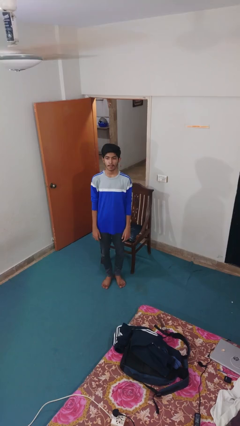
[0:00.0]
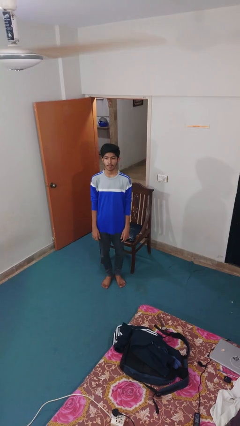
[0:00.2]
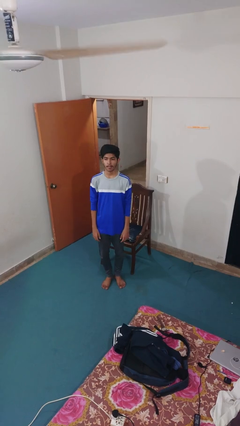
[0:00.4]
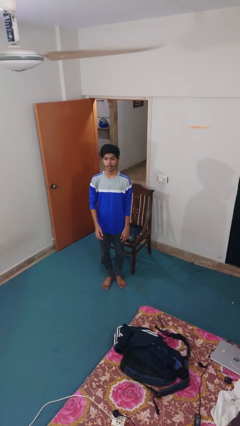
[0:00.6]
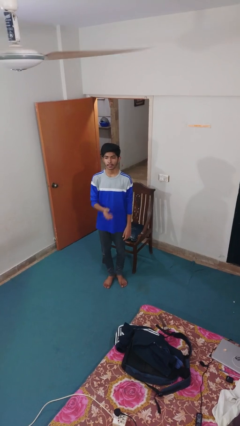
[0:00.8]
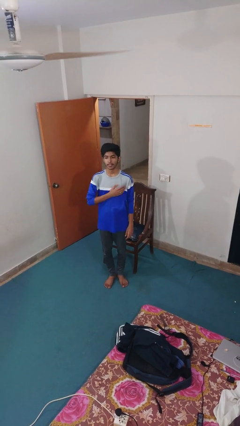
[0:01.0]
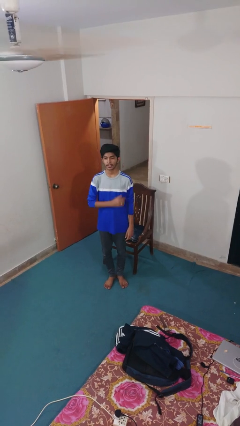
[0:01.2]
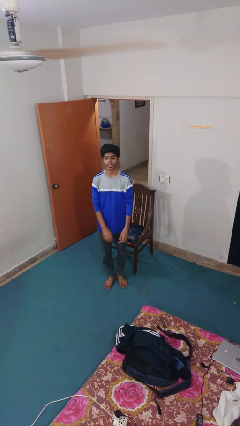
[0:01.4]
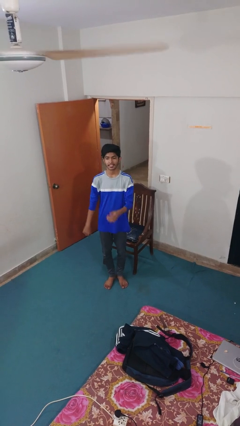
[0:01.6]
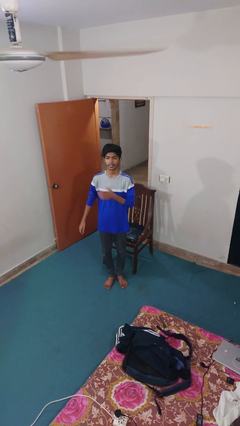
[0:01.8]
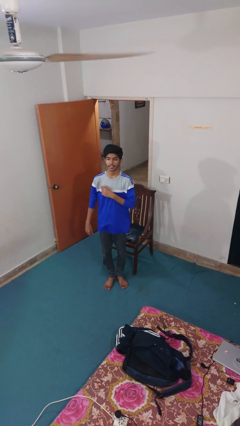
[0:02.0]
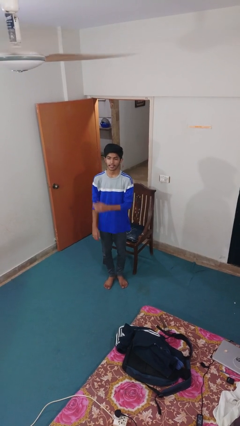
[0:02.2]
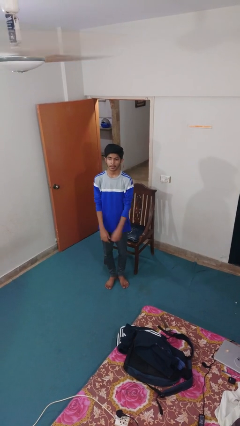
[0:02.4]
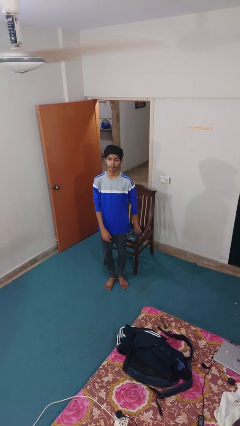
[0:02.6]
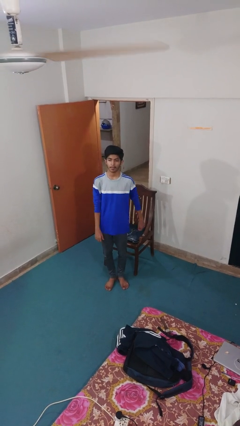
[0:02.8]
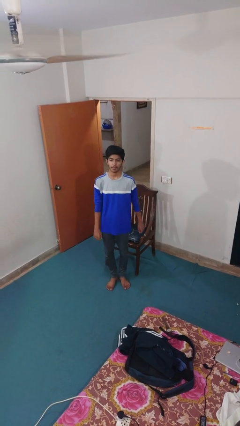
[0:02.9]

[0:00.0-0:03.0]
person drums on chest

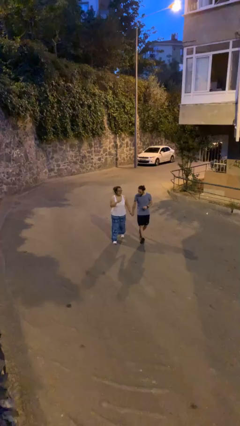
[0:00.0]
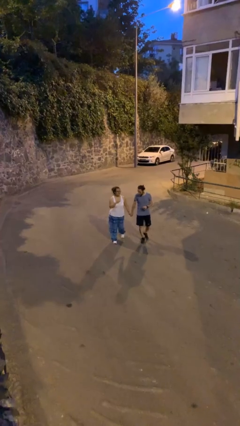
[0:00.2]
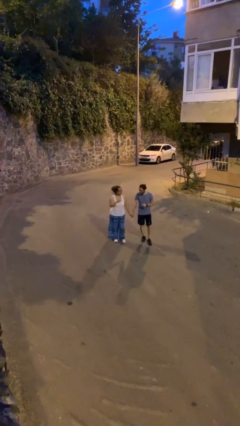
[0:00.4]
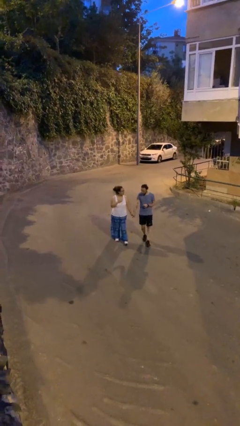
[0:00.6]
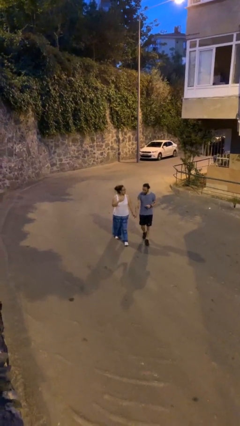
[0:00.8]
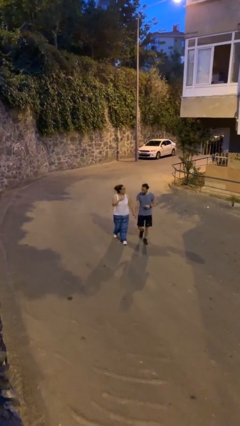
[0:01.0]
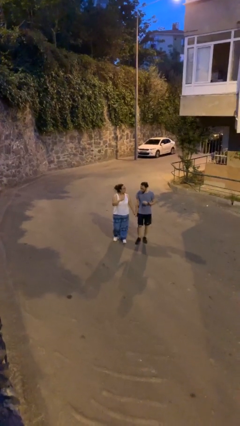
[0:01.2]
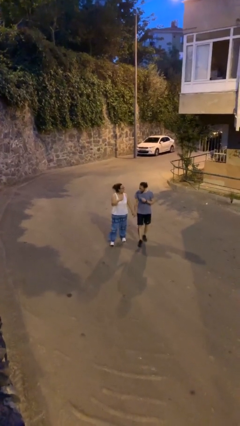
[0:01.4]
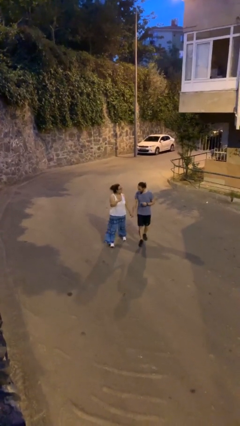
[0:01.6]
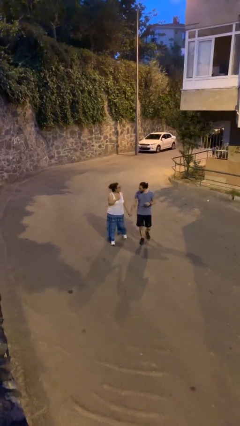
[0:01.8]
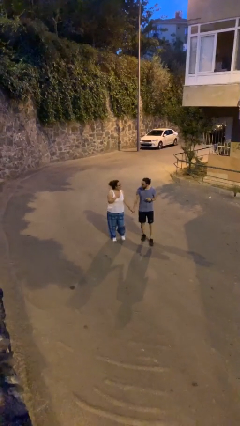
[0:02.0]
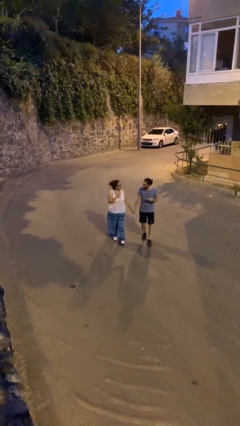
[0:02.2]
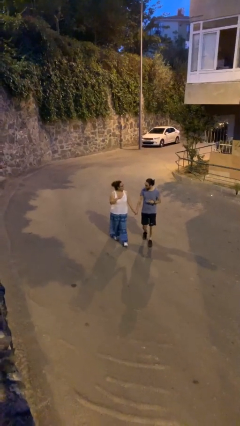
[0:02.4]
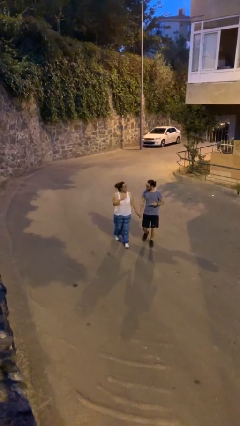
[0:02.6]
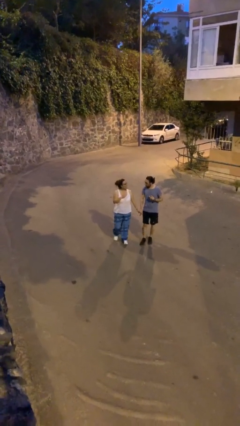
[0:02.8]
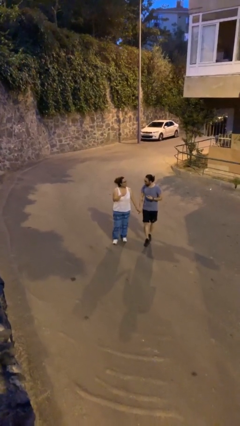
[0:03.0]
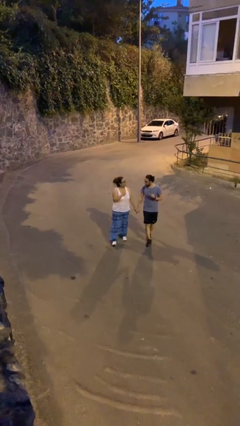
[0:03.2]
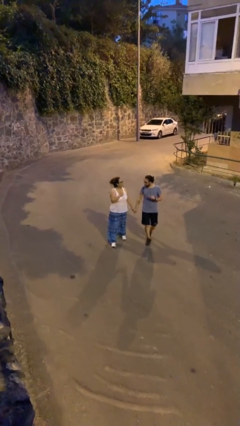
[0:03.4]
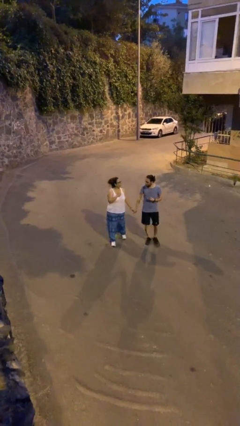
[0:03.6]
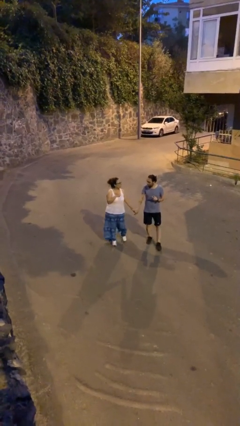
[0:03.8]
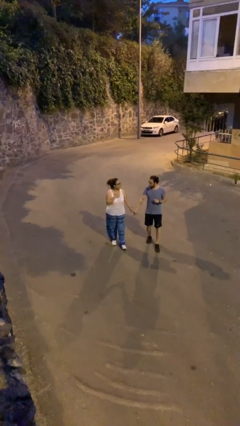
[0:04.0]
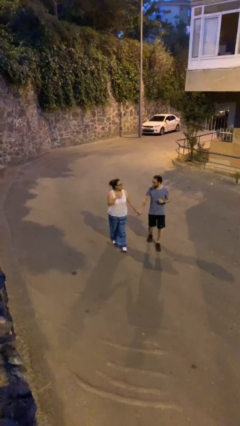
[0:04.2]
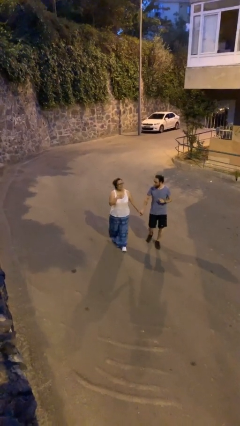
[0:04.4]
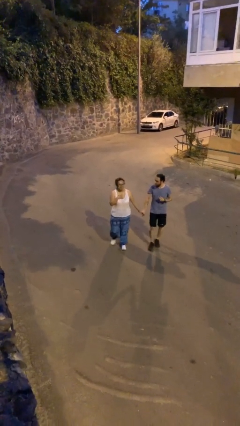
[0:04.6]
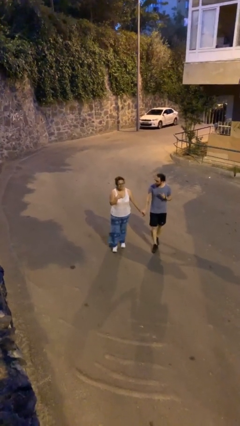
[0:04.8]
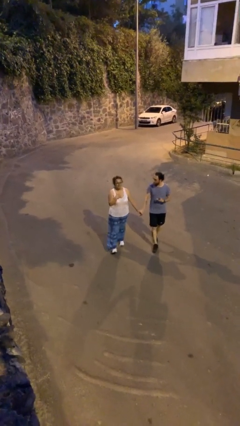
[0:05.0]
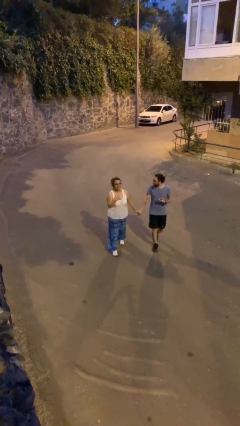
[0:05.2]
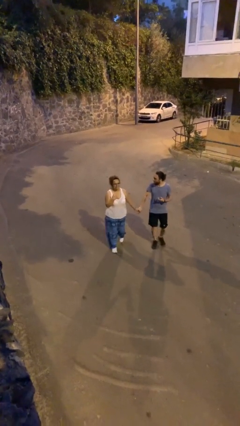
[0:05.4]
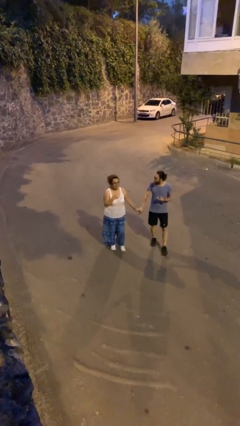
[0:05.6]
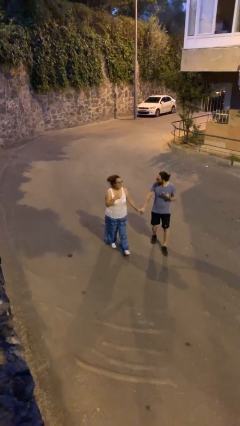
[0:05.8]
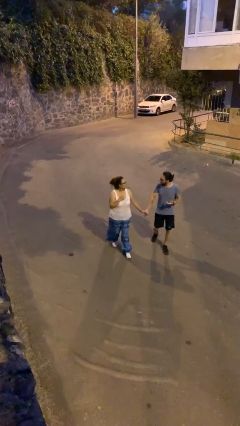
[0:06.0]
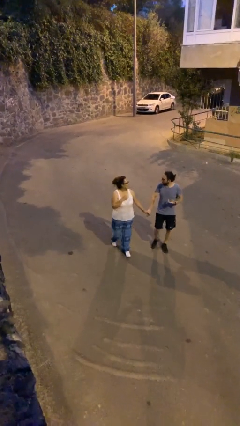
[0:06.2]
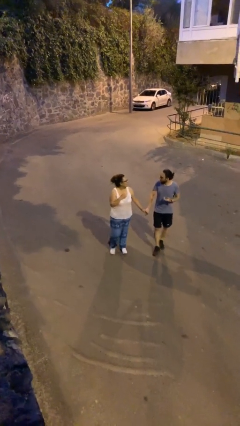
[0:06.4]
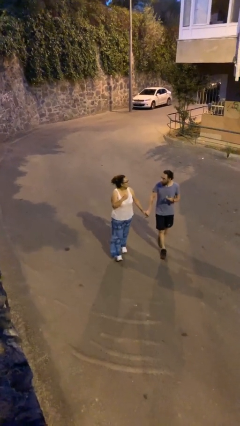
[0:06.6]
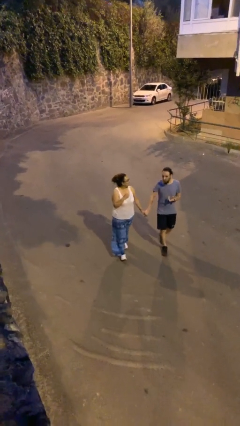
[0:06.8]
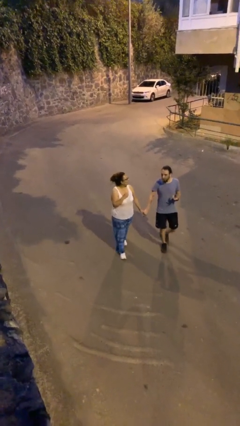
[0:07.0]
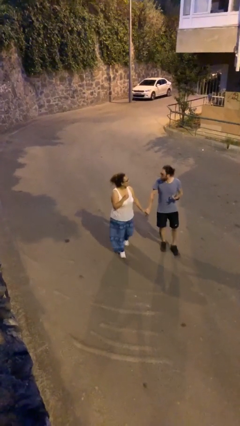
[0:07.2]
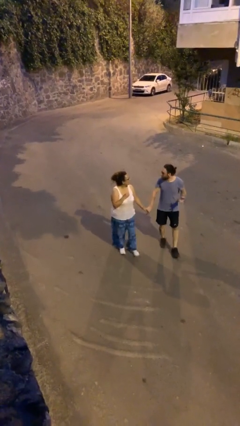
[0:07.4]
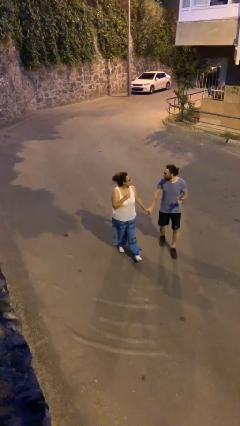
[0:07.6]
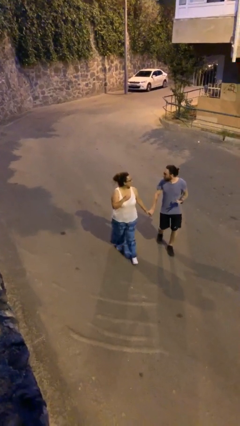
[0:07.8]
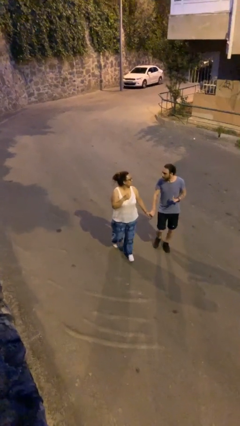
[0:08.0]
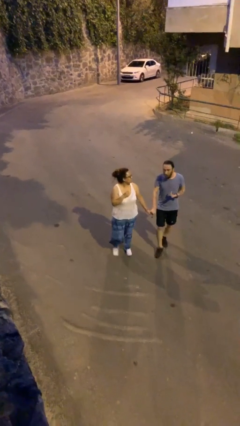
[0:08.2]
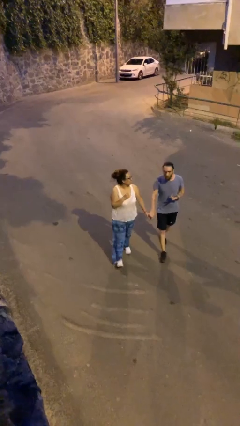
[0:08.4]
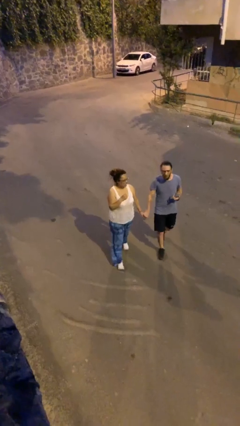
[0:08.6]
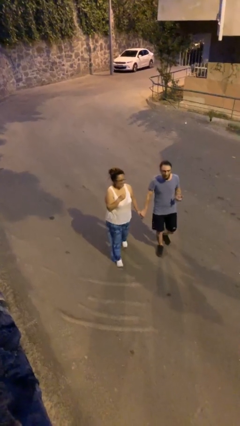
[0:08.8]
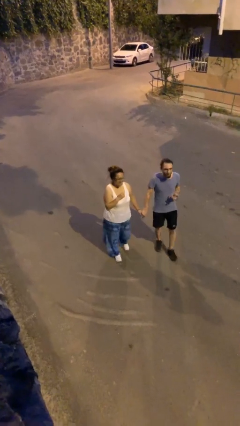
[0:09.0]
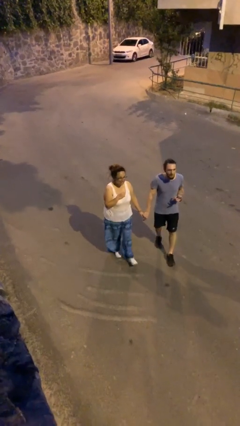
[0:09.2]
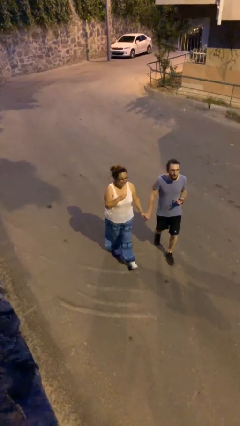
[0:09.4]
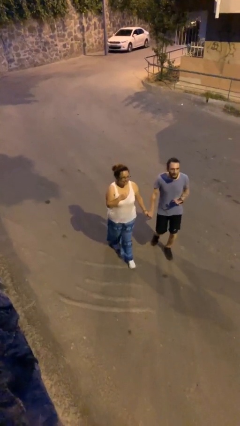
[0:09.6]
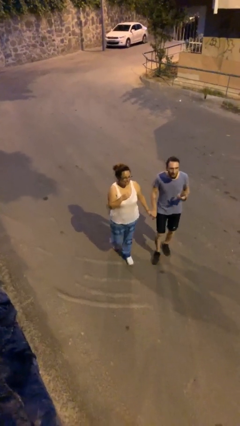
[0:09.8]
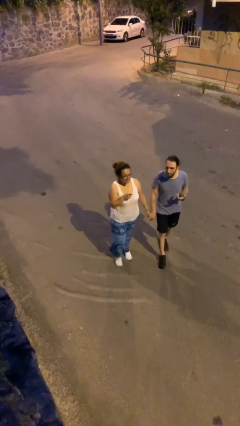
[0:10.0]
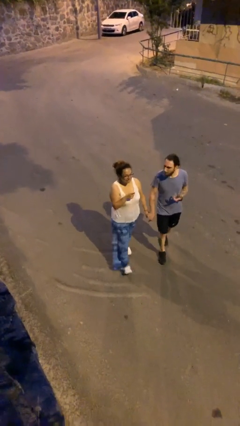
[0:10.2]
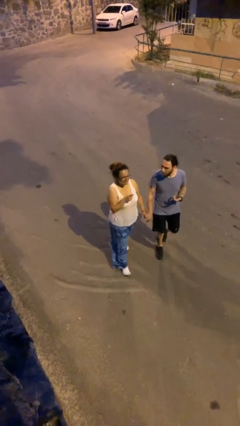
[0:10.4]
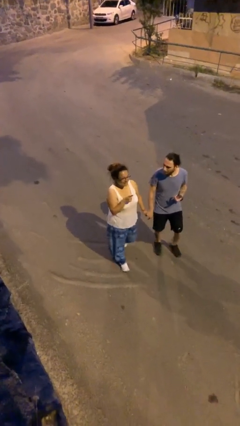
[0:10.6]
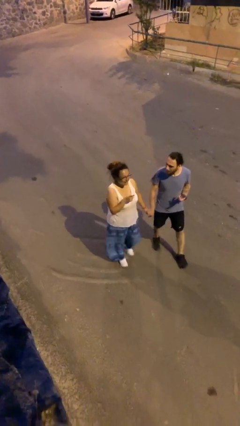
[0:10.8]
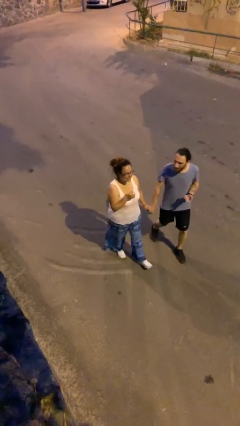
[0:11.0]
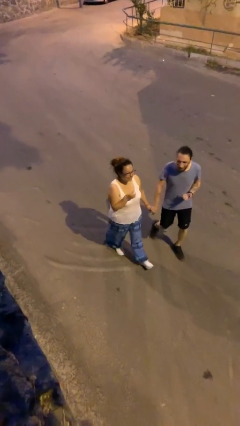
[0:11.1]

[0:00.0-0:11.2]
person holds hand

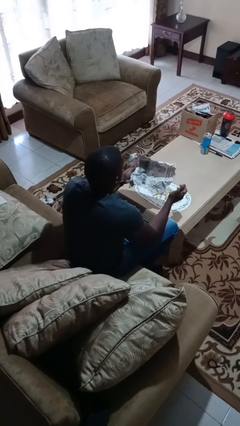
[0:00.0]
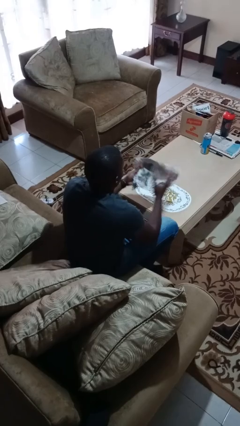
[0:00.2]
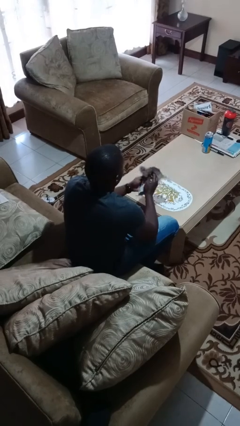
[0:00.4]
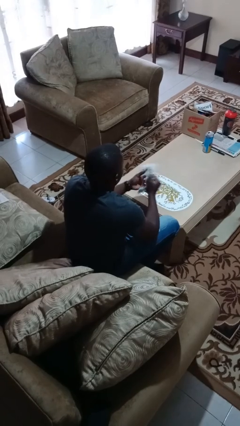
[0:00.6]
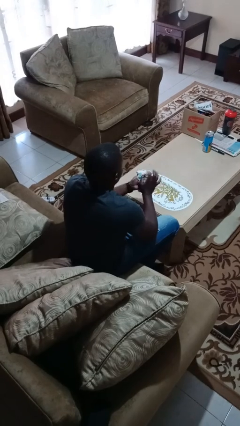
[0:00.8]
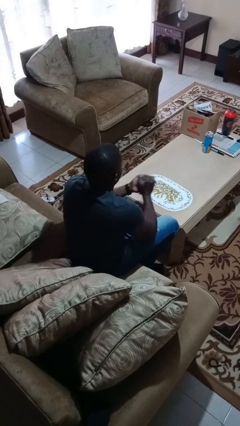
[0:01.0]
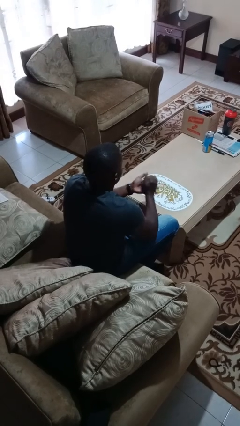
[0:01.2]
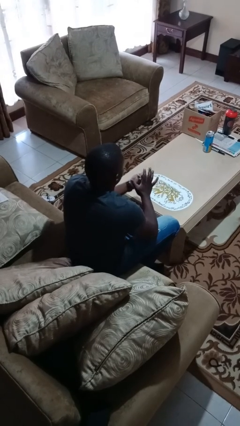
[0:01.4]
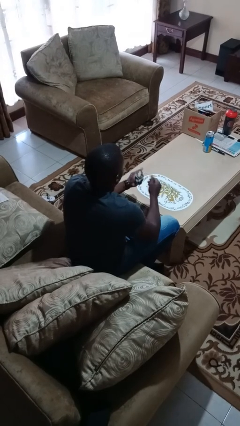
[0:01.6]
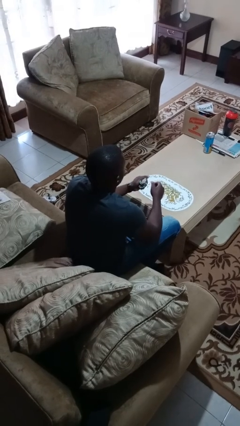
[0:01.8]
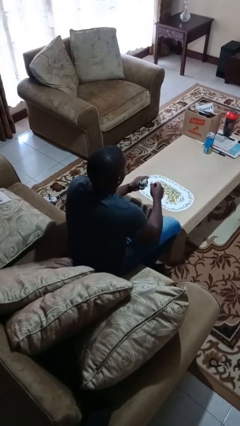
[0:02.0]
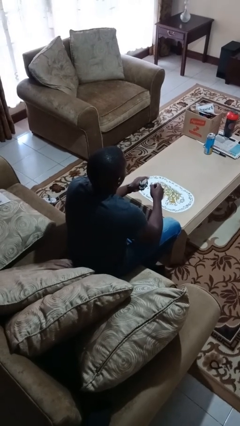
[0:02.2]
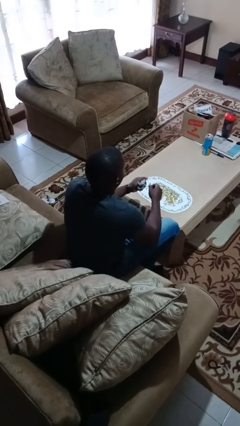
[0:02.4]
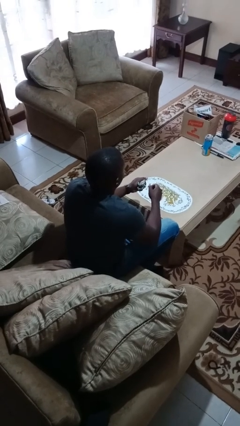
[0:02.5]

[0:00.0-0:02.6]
person crumples paper

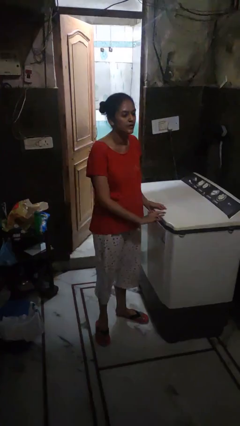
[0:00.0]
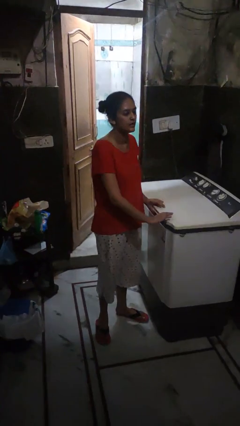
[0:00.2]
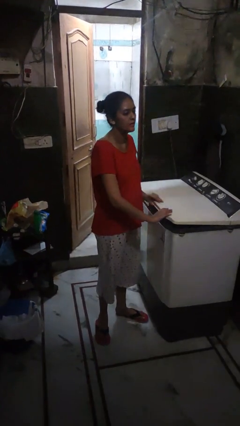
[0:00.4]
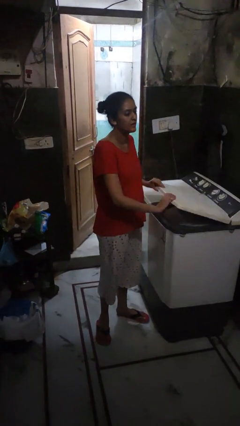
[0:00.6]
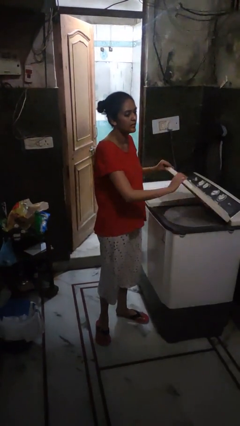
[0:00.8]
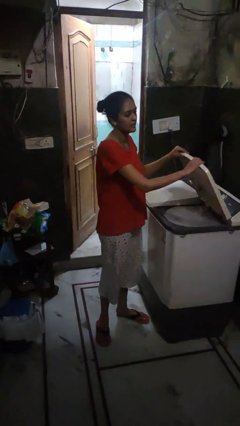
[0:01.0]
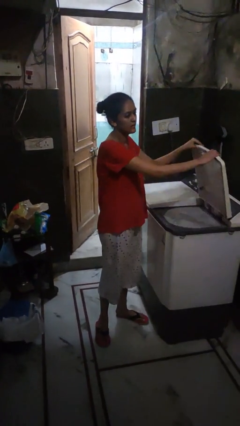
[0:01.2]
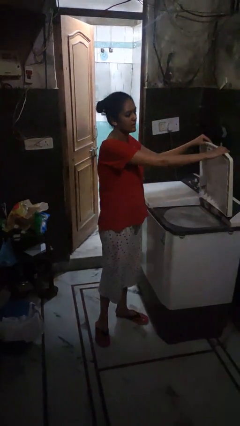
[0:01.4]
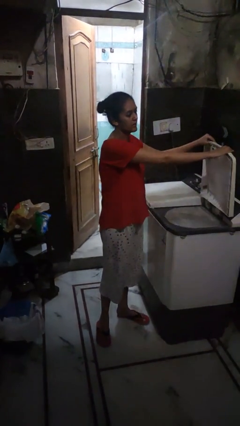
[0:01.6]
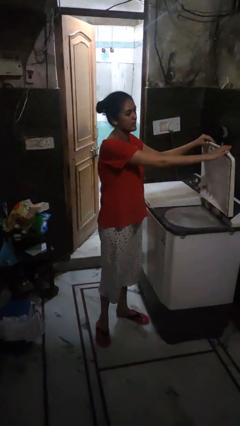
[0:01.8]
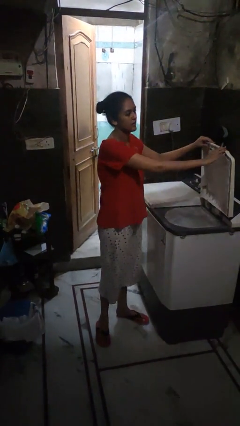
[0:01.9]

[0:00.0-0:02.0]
person opens clothes washer
